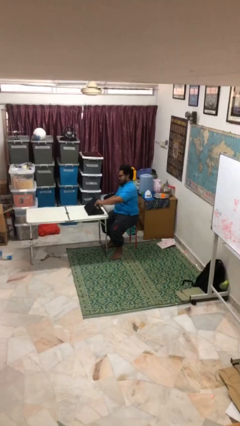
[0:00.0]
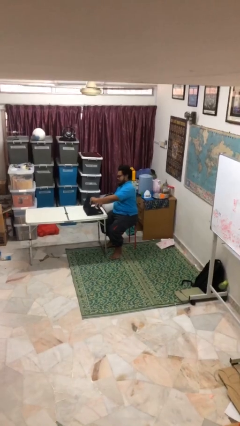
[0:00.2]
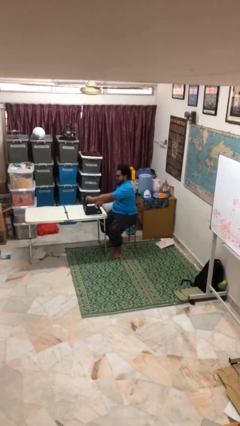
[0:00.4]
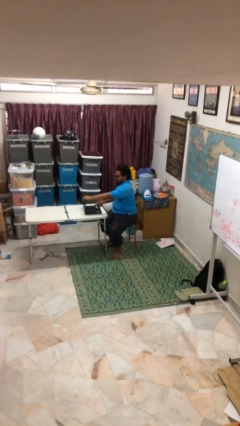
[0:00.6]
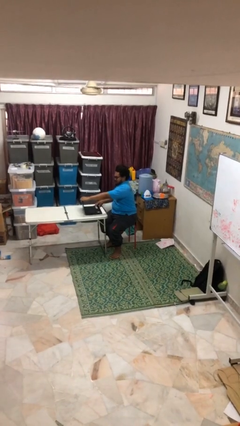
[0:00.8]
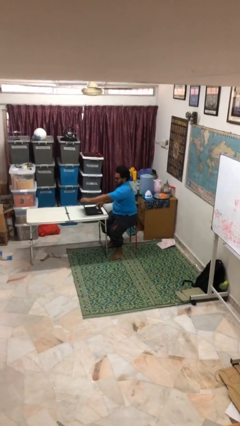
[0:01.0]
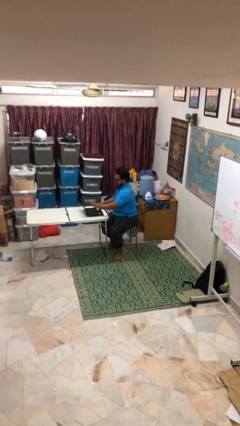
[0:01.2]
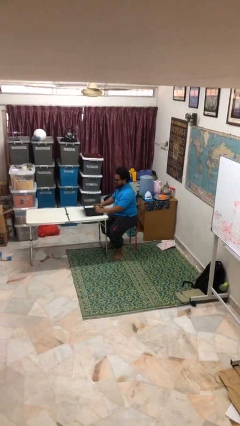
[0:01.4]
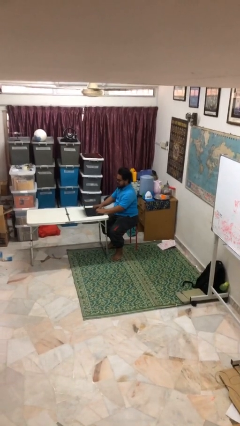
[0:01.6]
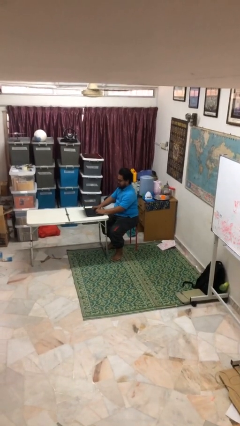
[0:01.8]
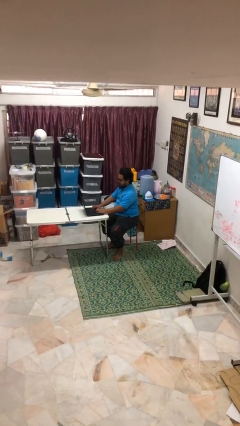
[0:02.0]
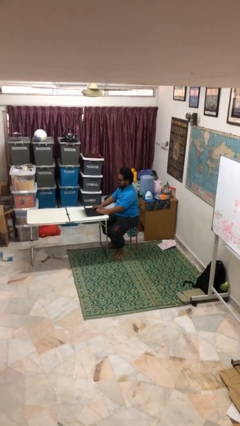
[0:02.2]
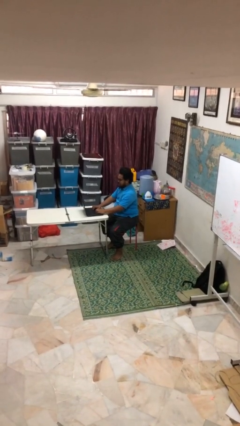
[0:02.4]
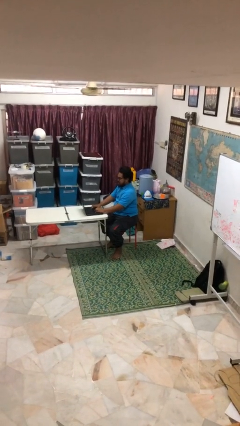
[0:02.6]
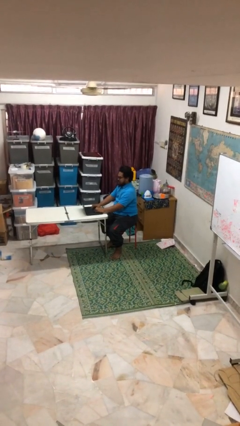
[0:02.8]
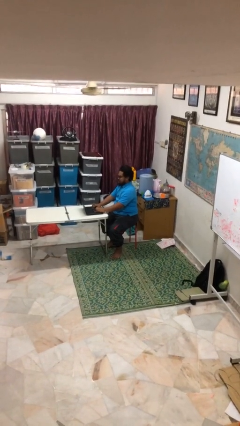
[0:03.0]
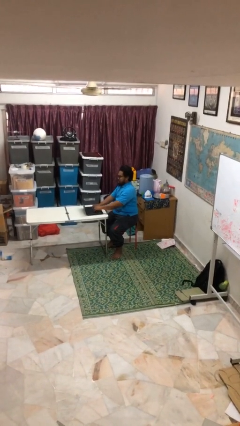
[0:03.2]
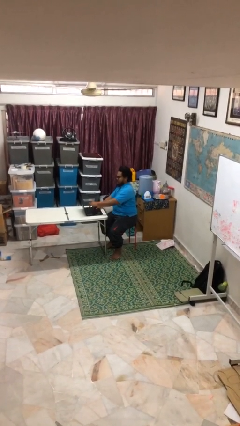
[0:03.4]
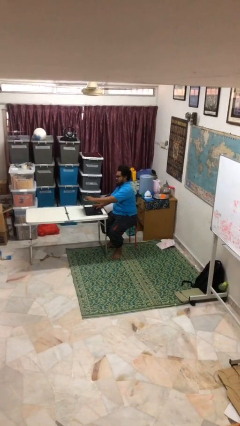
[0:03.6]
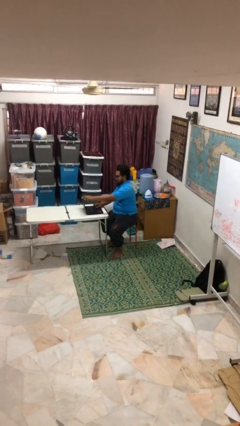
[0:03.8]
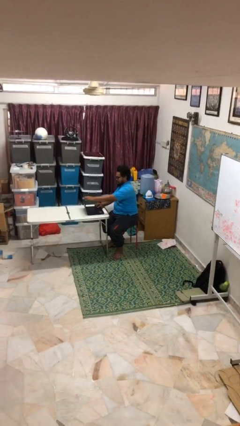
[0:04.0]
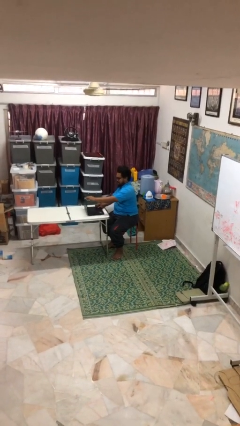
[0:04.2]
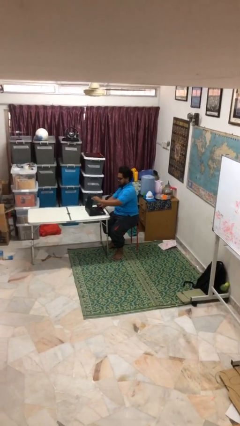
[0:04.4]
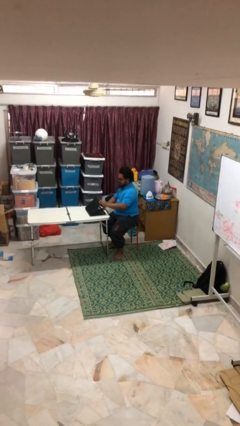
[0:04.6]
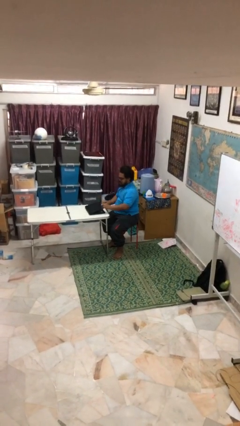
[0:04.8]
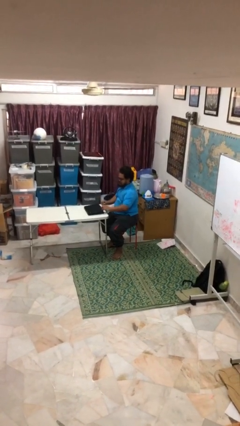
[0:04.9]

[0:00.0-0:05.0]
person interacts with laptop

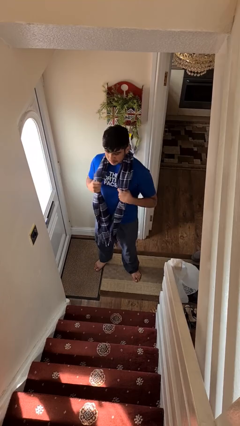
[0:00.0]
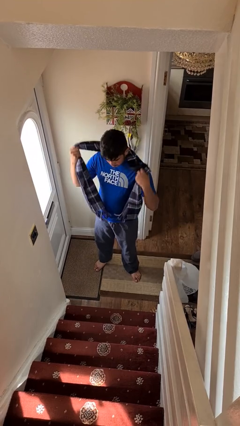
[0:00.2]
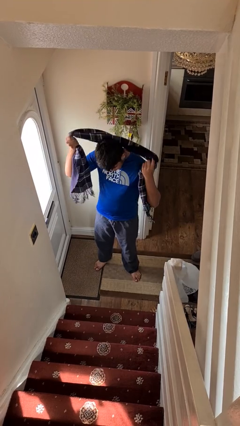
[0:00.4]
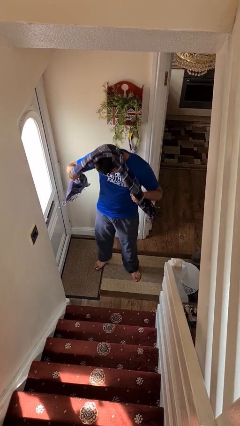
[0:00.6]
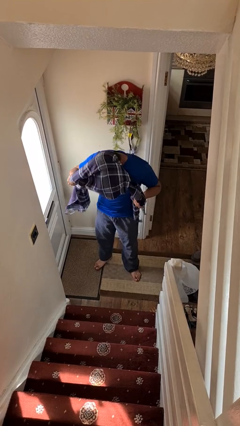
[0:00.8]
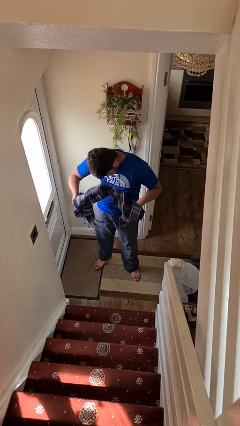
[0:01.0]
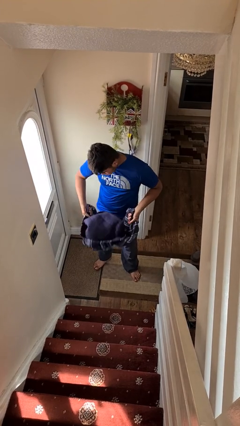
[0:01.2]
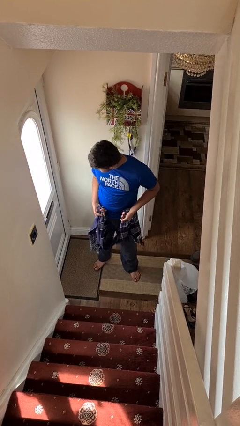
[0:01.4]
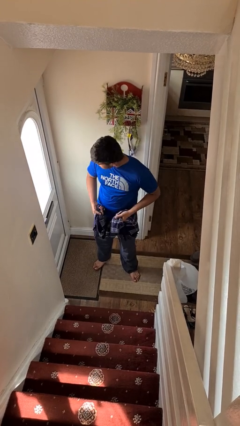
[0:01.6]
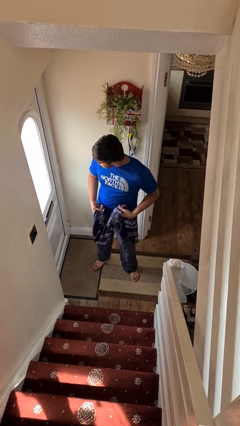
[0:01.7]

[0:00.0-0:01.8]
person takes off scarf

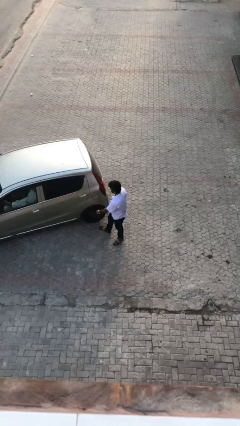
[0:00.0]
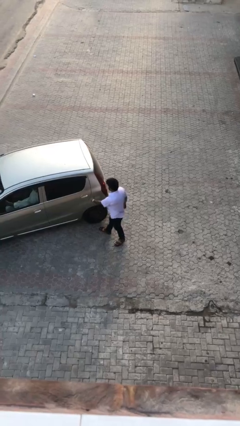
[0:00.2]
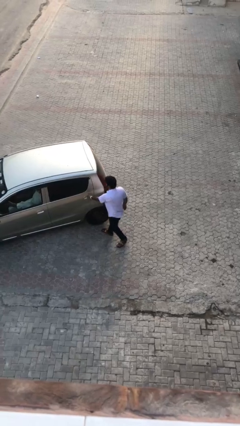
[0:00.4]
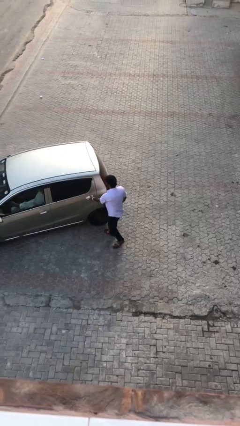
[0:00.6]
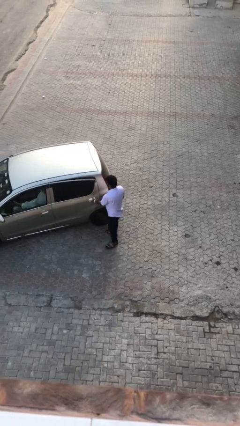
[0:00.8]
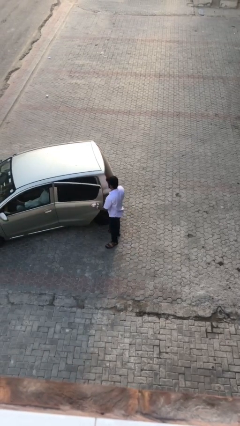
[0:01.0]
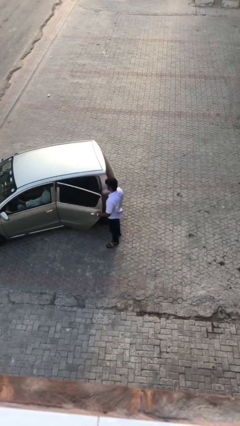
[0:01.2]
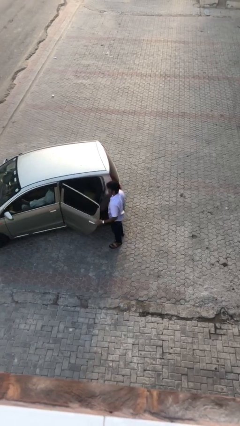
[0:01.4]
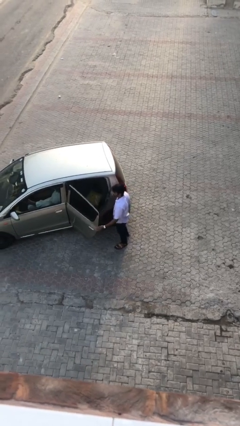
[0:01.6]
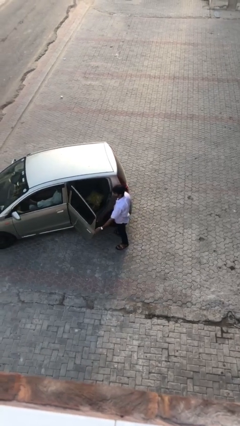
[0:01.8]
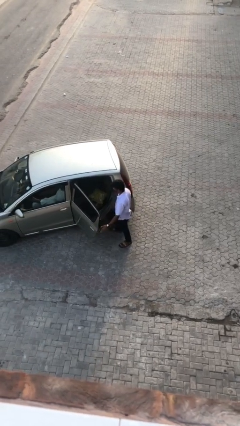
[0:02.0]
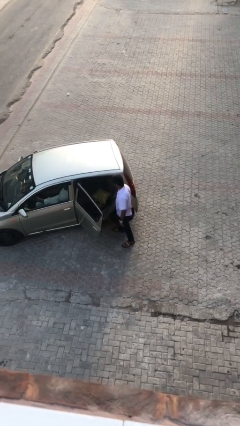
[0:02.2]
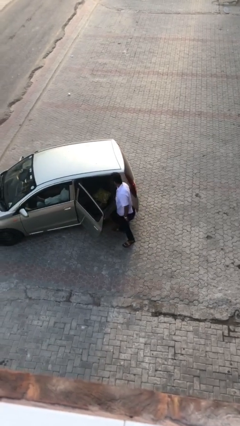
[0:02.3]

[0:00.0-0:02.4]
person opens car door

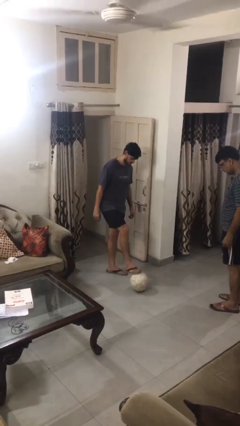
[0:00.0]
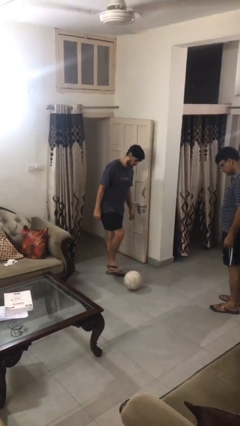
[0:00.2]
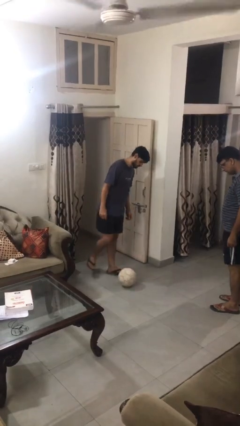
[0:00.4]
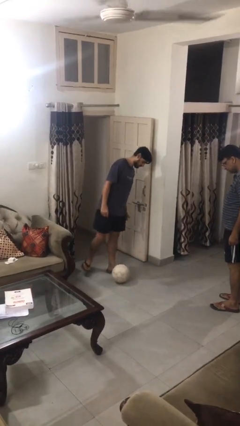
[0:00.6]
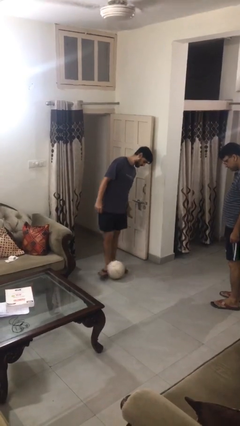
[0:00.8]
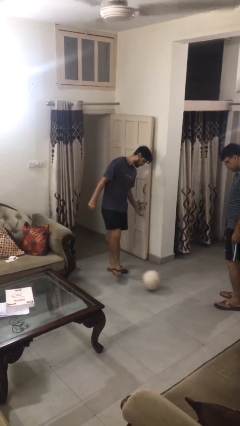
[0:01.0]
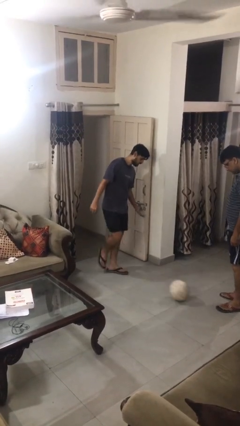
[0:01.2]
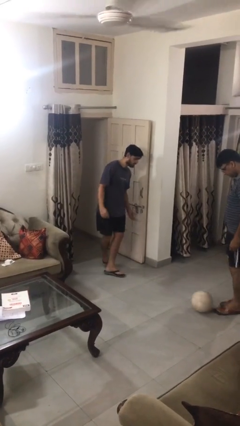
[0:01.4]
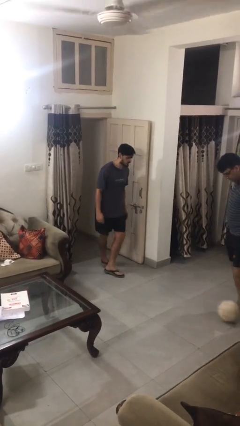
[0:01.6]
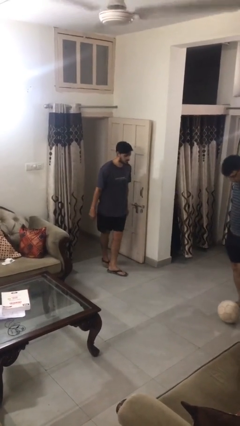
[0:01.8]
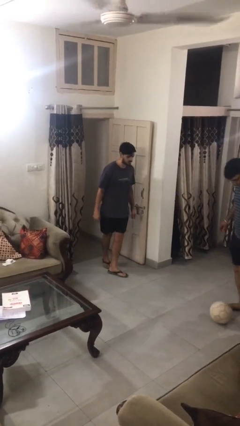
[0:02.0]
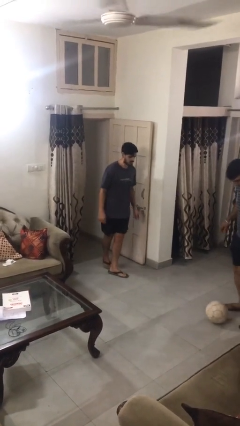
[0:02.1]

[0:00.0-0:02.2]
person kicks object to person

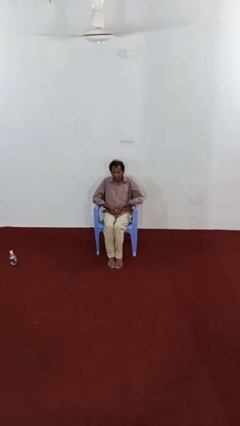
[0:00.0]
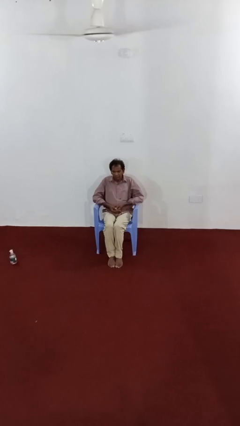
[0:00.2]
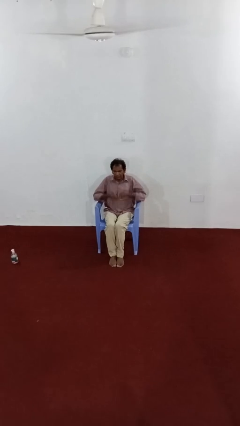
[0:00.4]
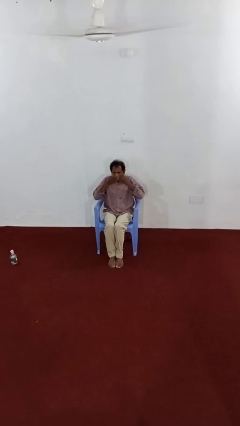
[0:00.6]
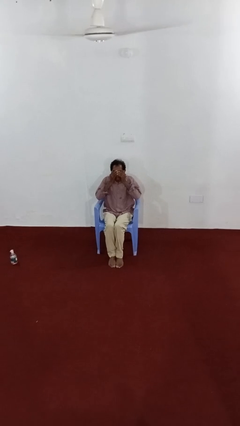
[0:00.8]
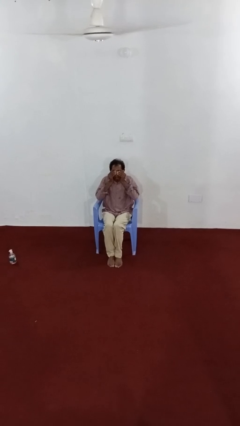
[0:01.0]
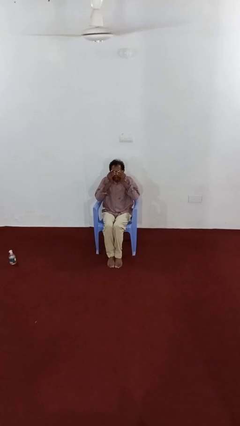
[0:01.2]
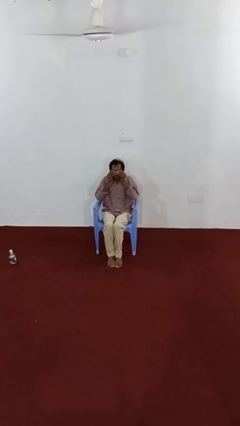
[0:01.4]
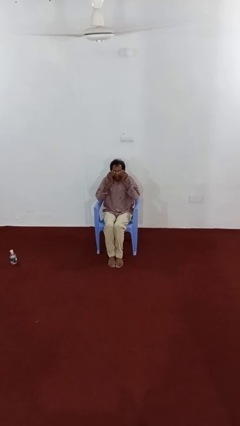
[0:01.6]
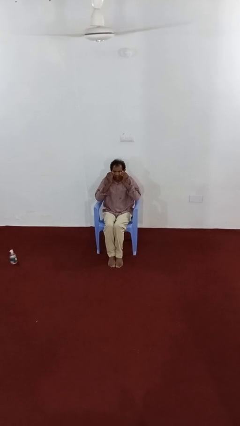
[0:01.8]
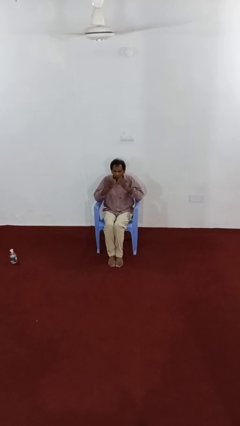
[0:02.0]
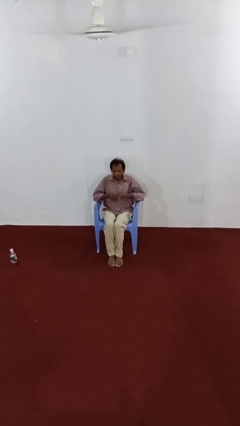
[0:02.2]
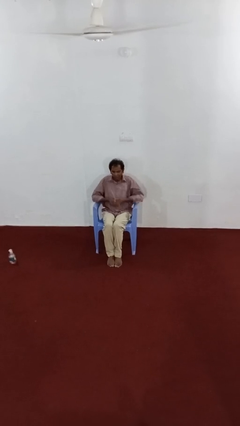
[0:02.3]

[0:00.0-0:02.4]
person rubs eyes

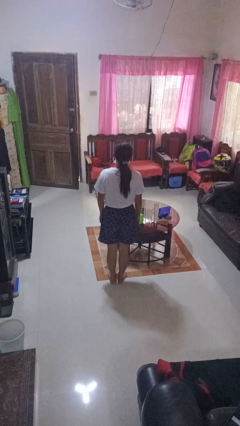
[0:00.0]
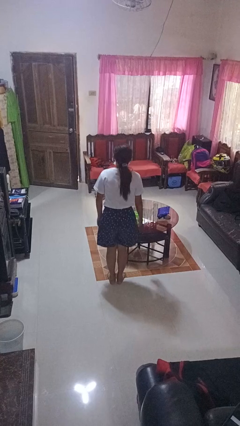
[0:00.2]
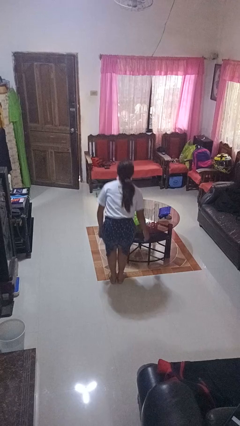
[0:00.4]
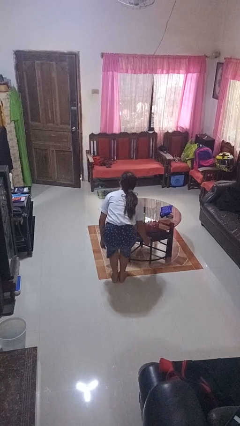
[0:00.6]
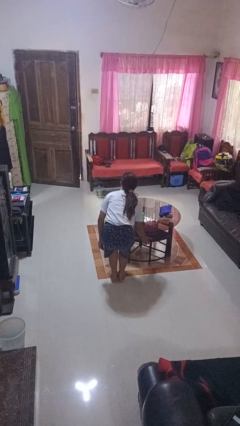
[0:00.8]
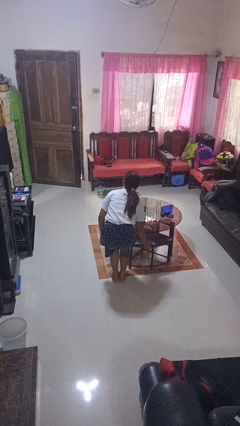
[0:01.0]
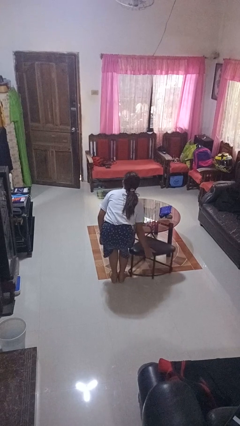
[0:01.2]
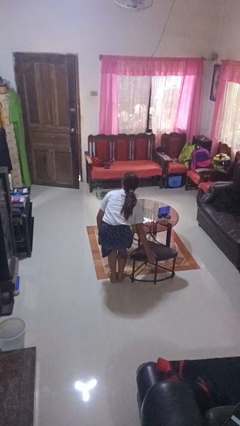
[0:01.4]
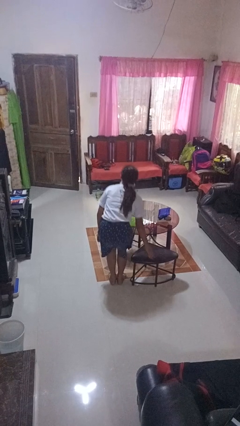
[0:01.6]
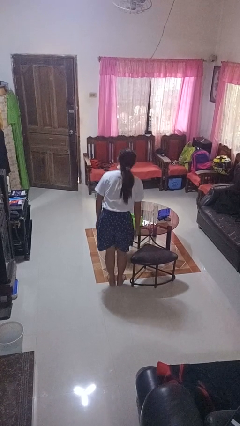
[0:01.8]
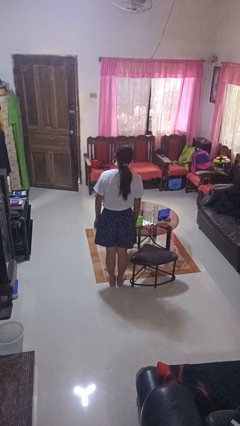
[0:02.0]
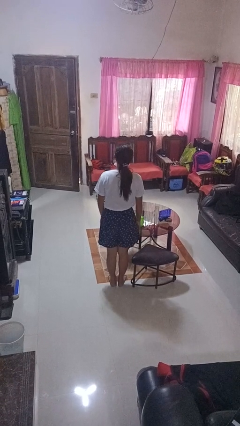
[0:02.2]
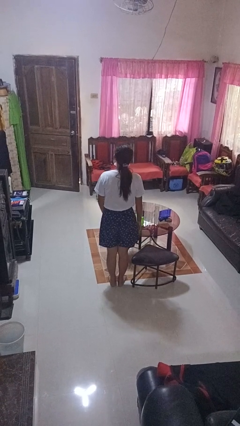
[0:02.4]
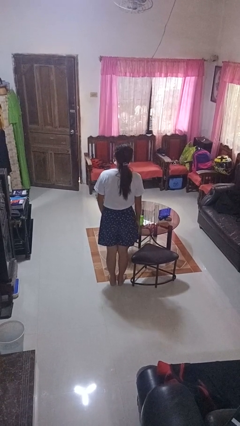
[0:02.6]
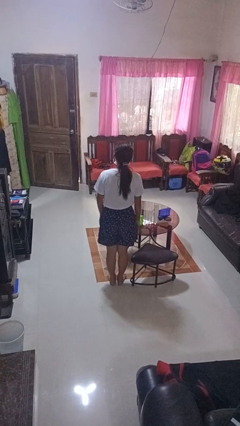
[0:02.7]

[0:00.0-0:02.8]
person pulls out chair

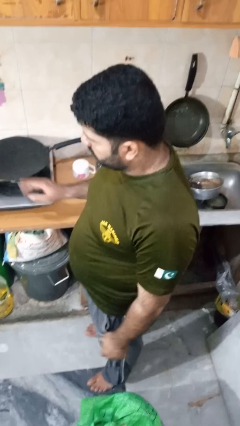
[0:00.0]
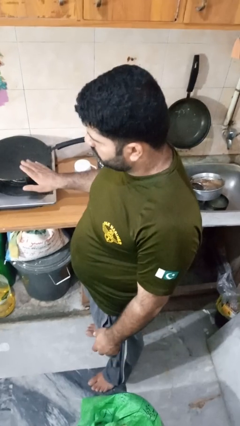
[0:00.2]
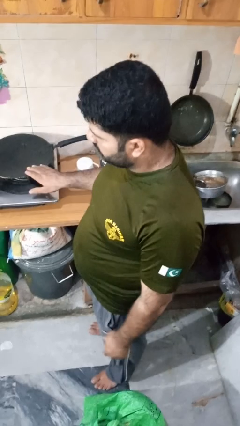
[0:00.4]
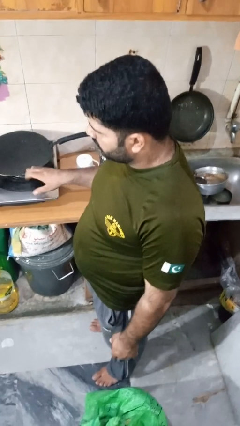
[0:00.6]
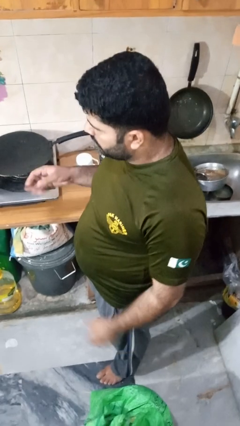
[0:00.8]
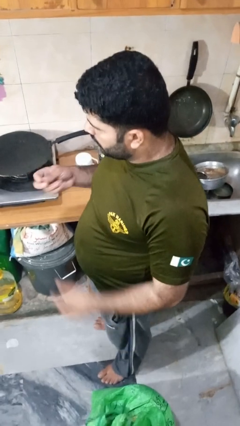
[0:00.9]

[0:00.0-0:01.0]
person burns hand
